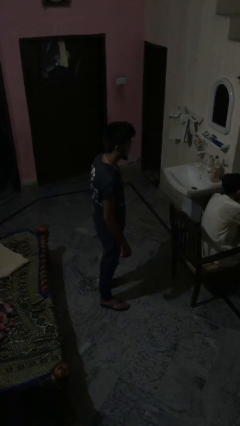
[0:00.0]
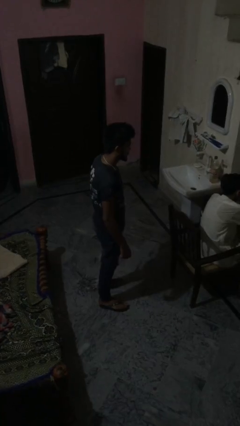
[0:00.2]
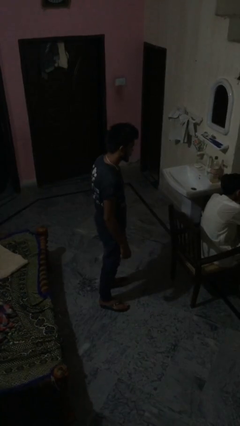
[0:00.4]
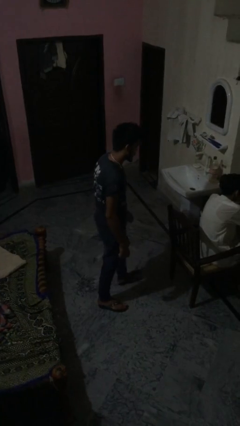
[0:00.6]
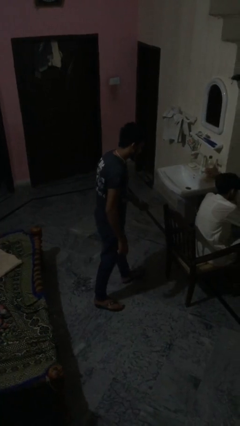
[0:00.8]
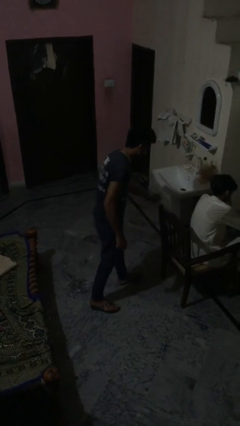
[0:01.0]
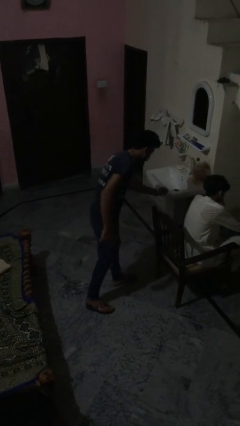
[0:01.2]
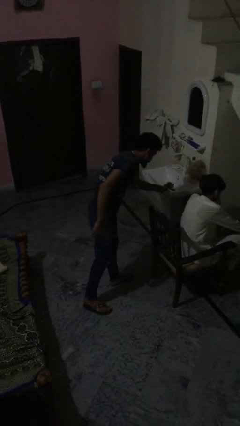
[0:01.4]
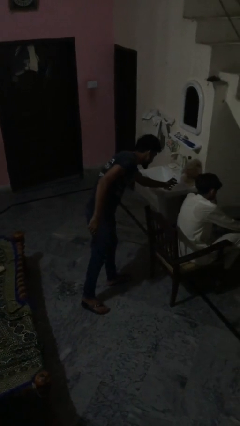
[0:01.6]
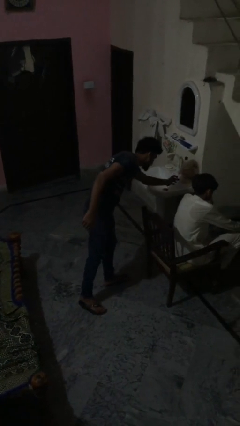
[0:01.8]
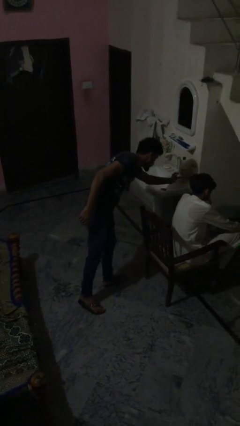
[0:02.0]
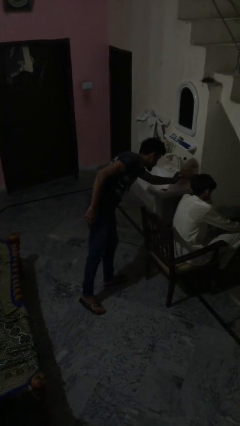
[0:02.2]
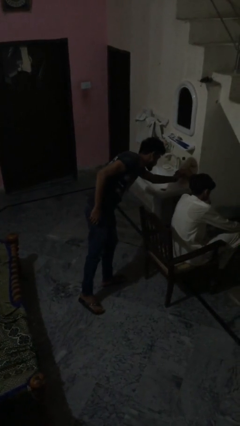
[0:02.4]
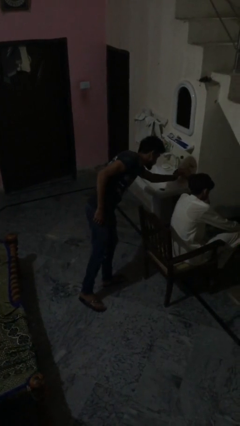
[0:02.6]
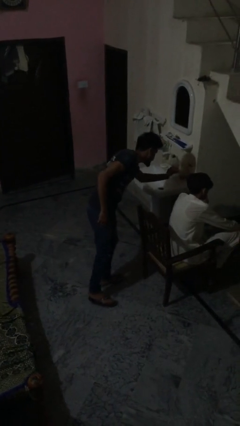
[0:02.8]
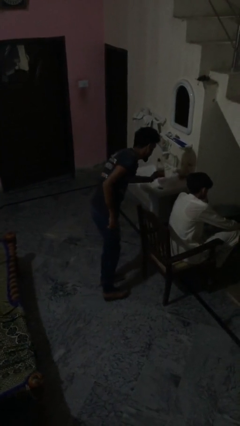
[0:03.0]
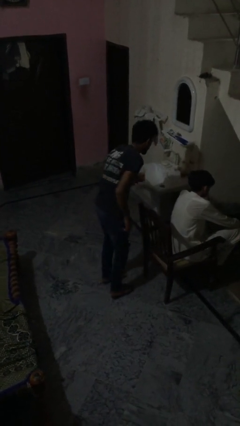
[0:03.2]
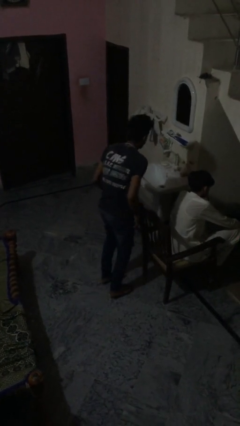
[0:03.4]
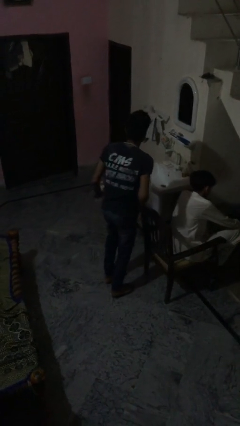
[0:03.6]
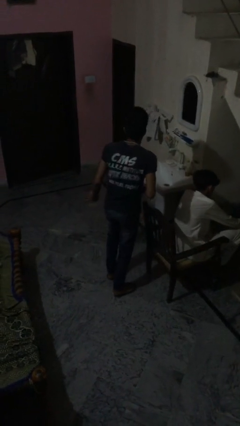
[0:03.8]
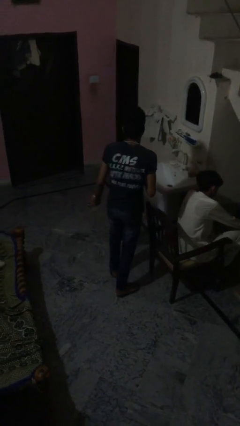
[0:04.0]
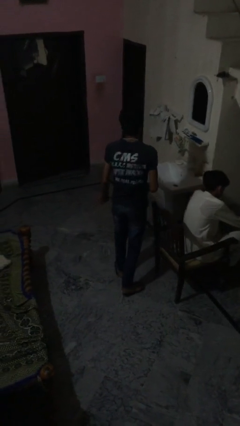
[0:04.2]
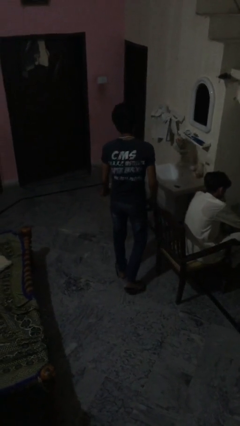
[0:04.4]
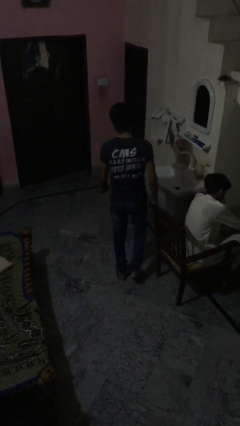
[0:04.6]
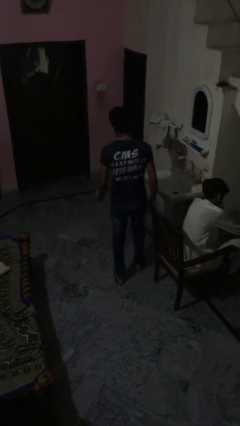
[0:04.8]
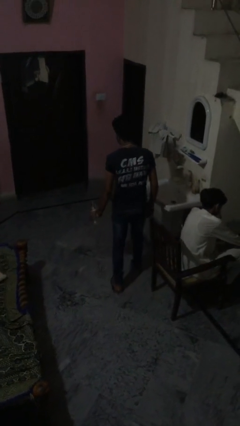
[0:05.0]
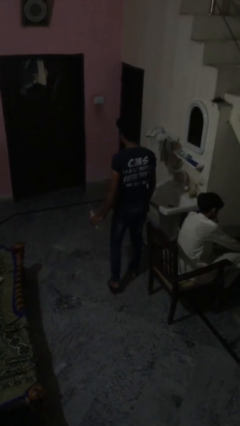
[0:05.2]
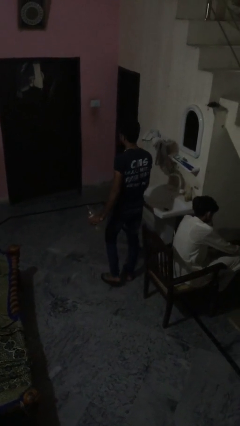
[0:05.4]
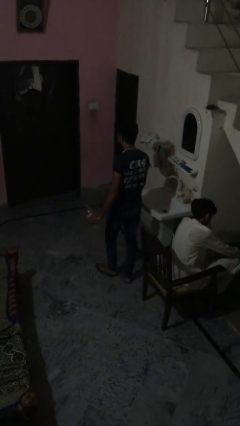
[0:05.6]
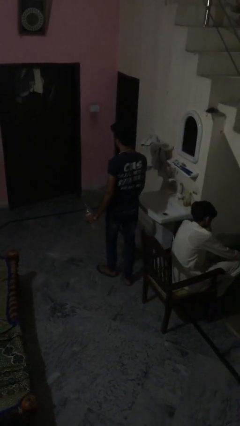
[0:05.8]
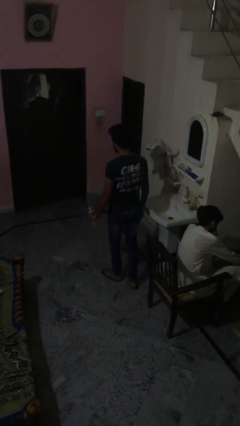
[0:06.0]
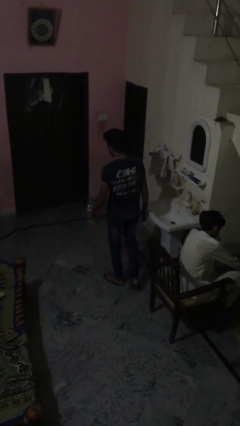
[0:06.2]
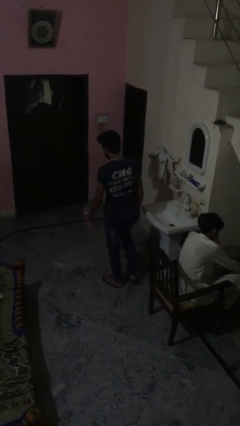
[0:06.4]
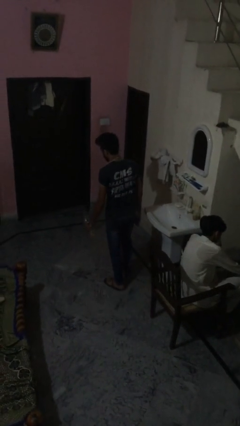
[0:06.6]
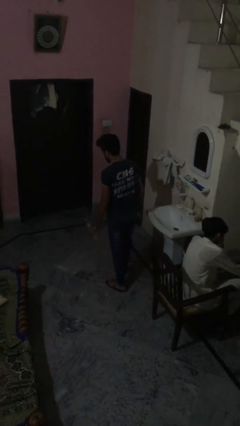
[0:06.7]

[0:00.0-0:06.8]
person steals object from person

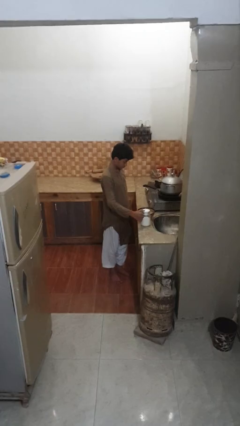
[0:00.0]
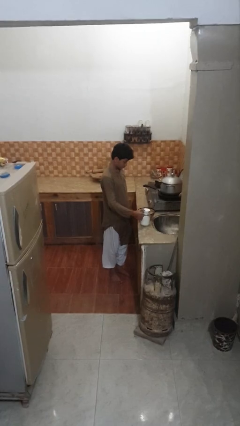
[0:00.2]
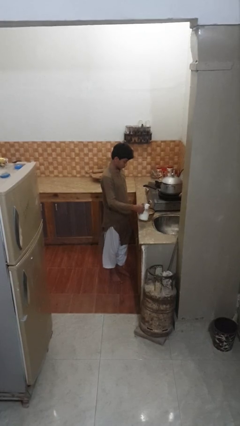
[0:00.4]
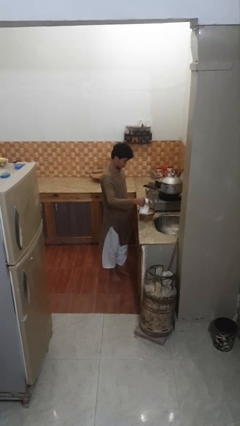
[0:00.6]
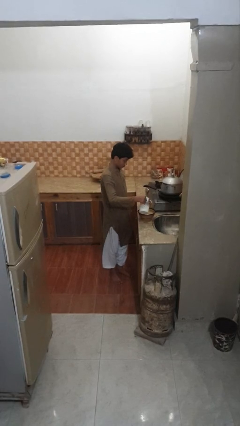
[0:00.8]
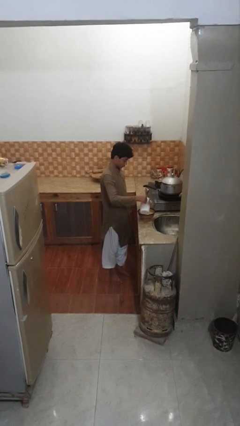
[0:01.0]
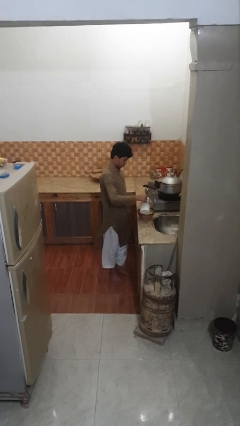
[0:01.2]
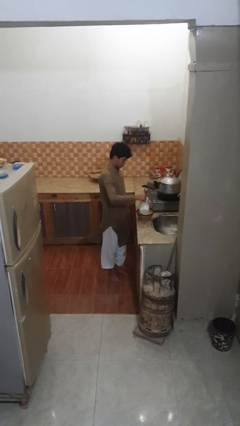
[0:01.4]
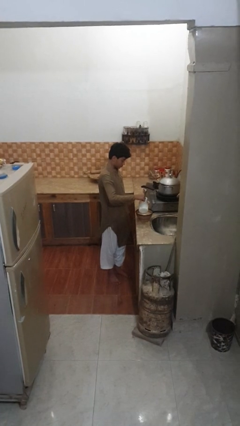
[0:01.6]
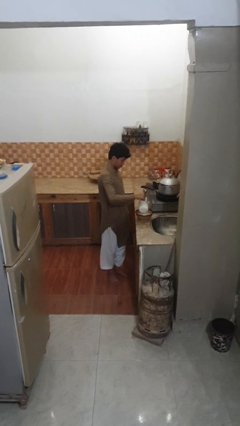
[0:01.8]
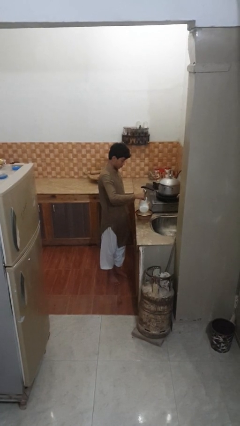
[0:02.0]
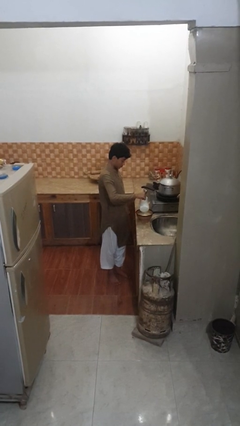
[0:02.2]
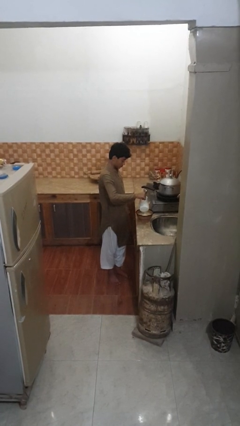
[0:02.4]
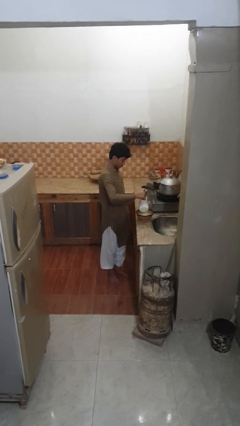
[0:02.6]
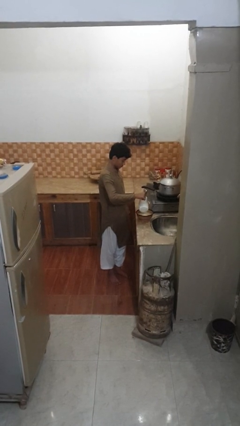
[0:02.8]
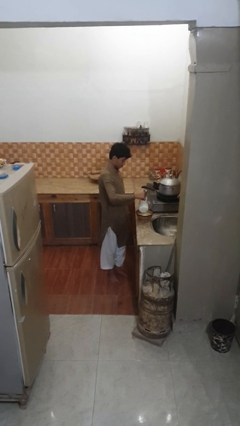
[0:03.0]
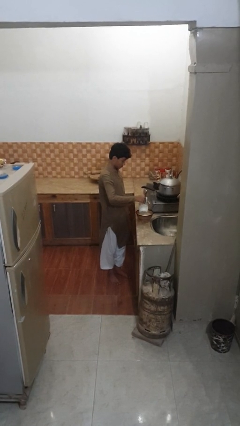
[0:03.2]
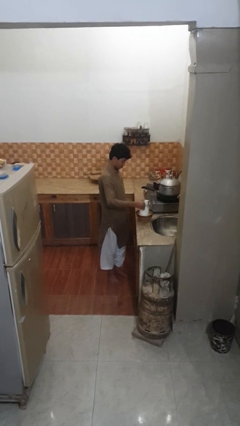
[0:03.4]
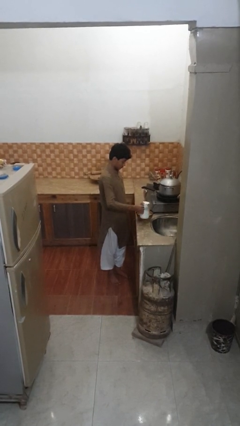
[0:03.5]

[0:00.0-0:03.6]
person pours into bowl

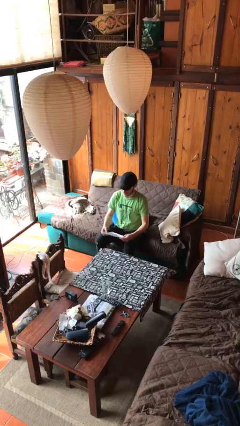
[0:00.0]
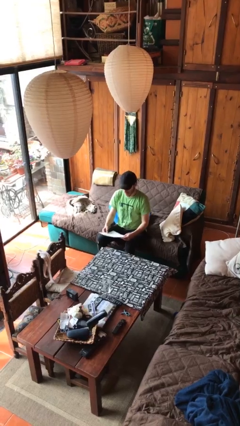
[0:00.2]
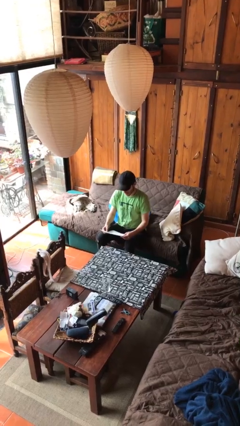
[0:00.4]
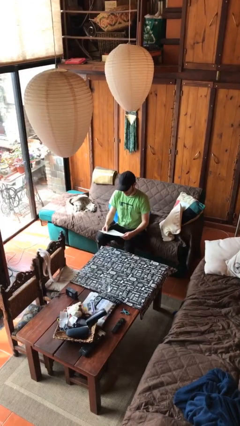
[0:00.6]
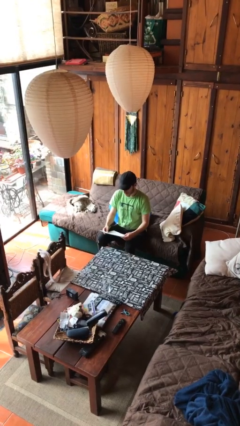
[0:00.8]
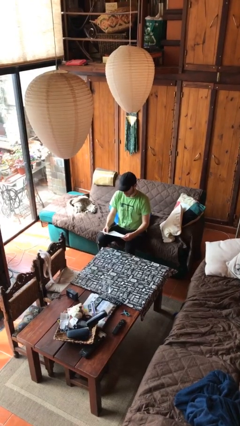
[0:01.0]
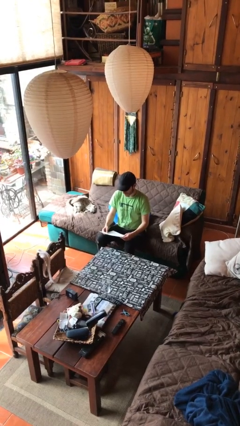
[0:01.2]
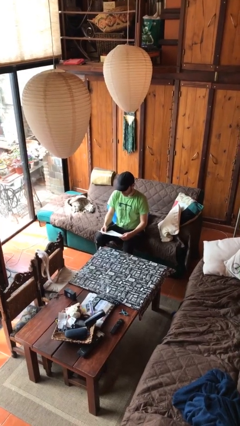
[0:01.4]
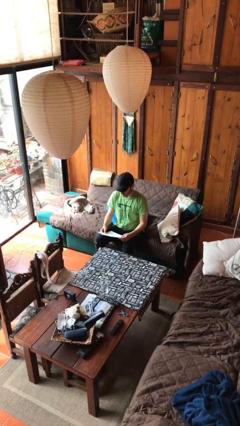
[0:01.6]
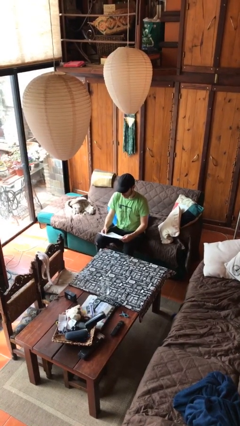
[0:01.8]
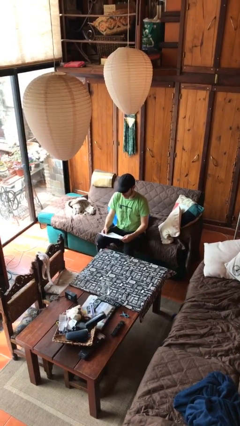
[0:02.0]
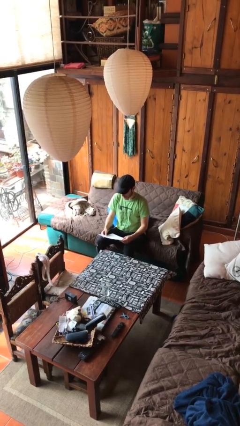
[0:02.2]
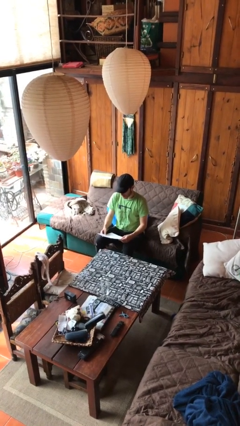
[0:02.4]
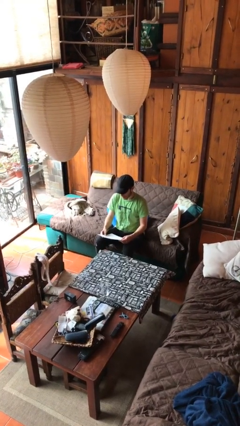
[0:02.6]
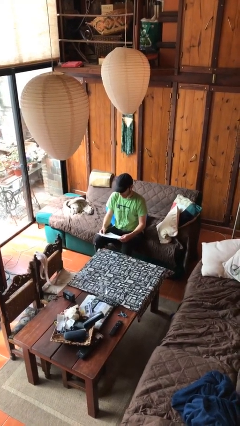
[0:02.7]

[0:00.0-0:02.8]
person reads document

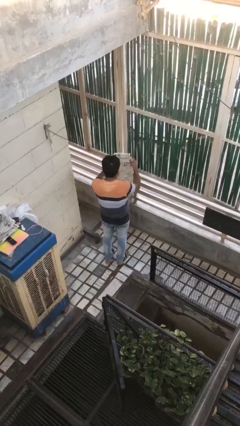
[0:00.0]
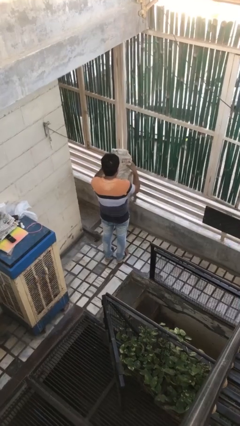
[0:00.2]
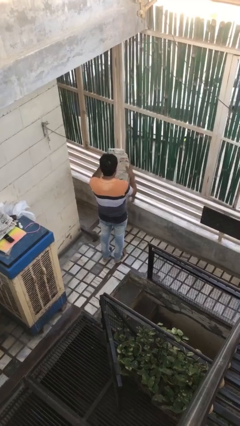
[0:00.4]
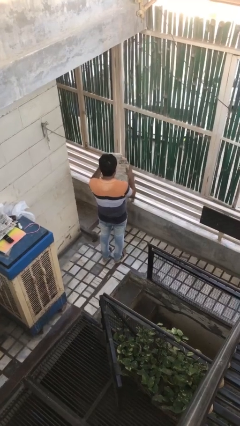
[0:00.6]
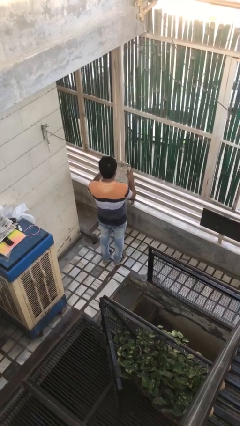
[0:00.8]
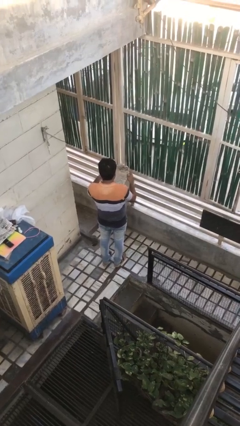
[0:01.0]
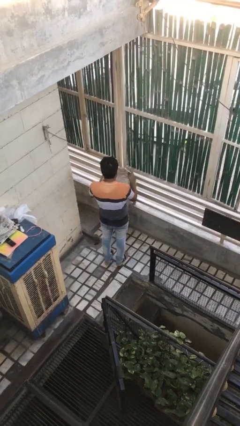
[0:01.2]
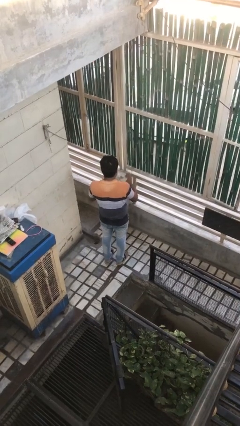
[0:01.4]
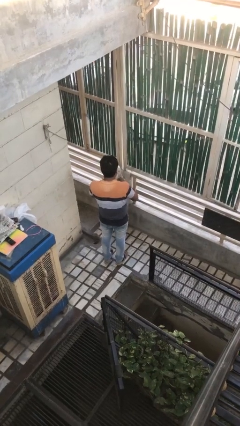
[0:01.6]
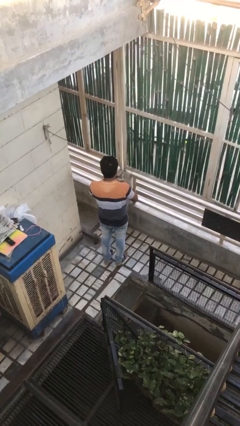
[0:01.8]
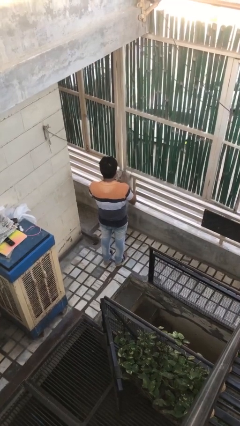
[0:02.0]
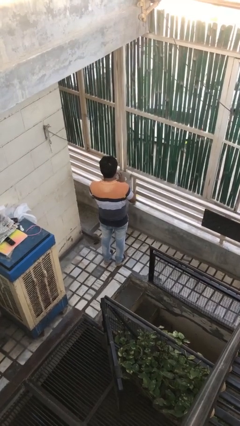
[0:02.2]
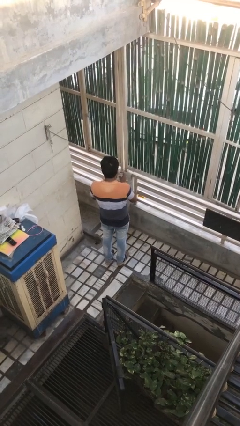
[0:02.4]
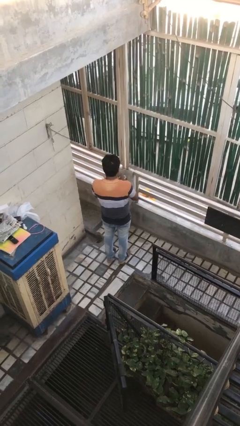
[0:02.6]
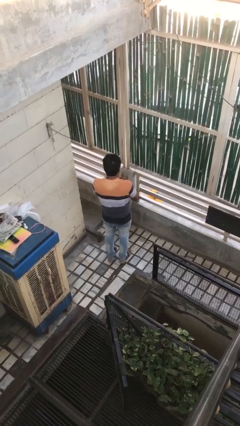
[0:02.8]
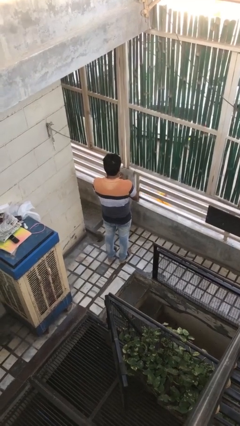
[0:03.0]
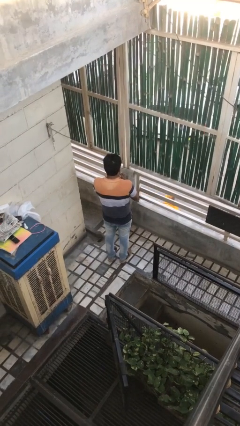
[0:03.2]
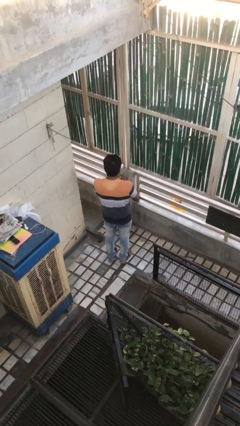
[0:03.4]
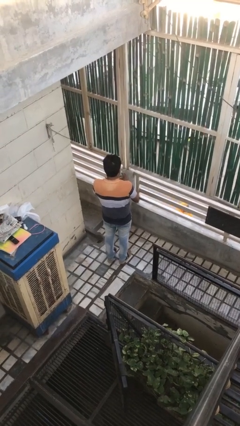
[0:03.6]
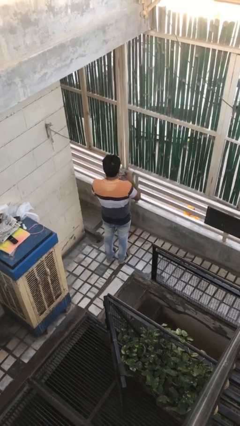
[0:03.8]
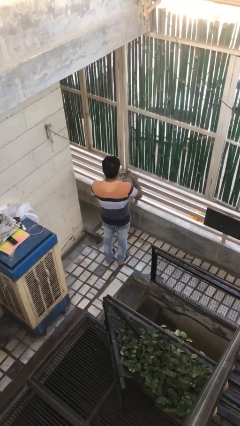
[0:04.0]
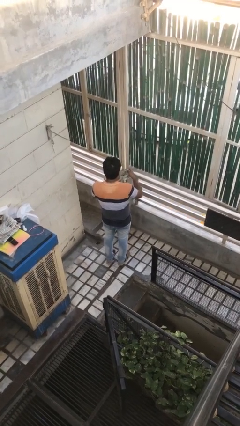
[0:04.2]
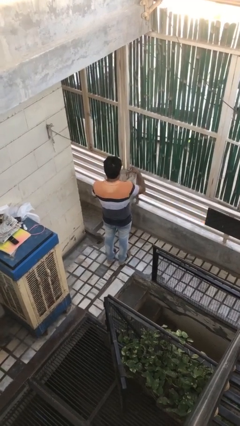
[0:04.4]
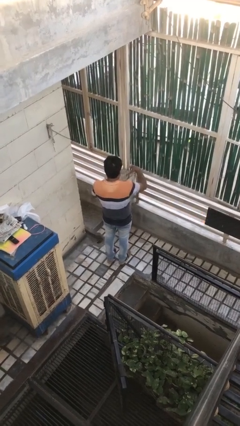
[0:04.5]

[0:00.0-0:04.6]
person crumples paper
